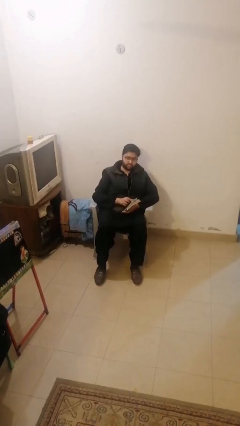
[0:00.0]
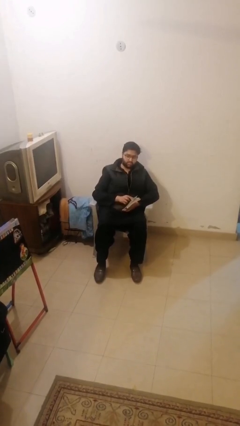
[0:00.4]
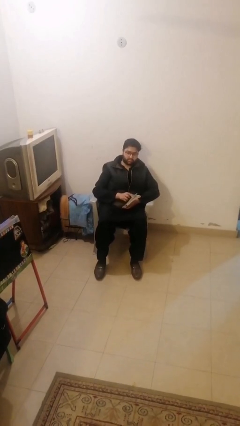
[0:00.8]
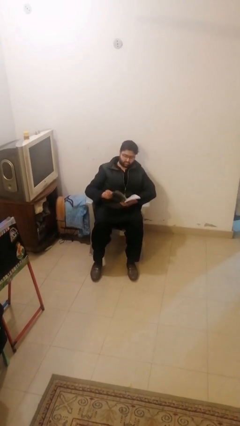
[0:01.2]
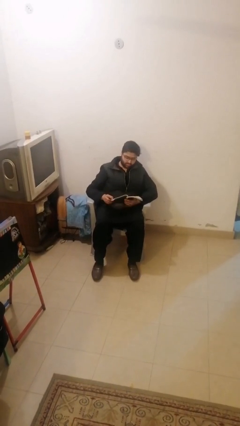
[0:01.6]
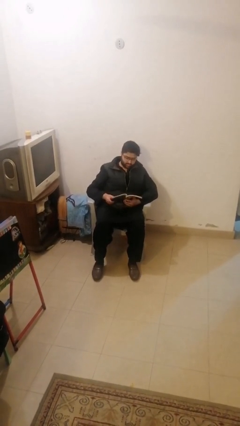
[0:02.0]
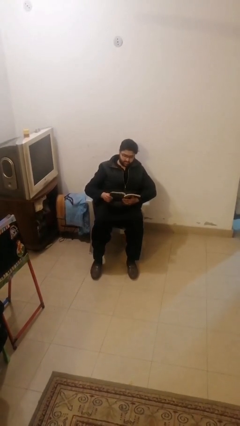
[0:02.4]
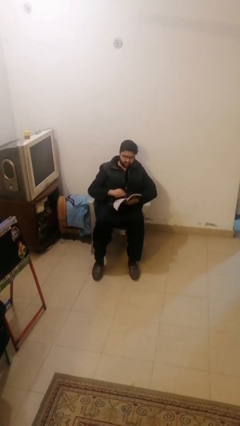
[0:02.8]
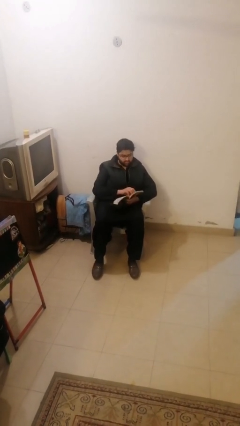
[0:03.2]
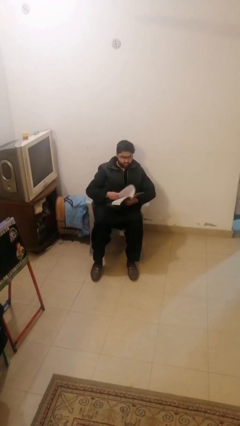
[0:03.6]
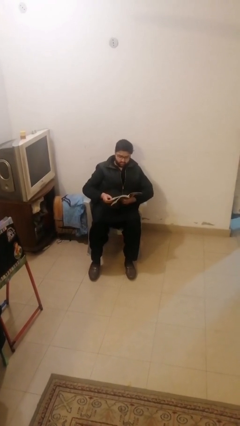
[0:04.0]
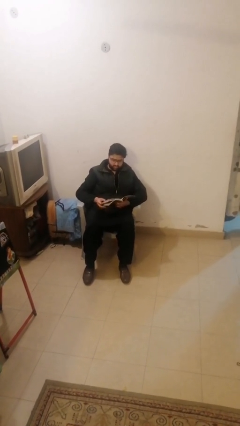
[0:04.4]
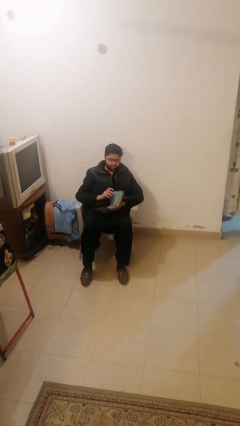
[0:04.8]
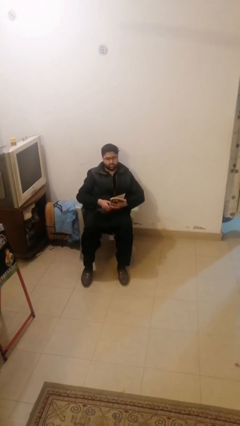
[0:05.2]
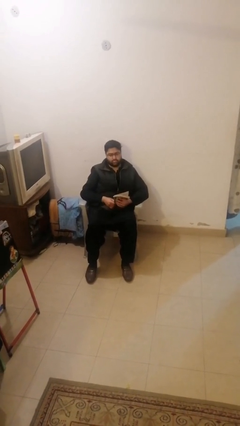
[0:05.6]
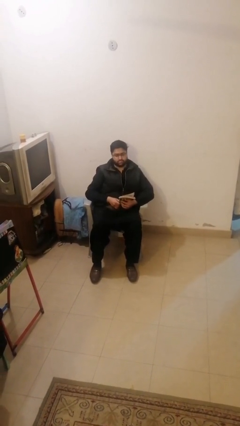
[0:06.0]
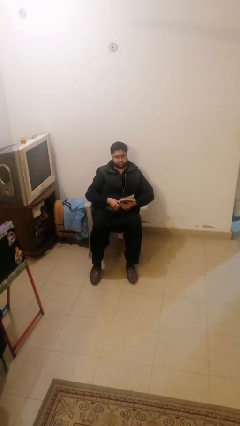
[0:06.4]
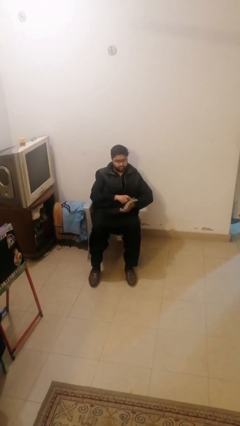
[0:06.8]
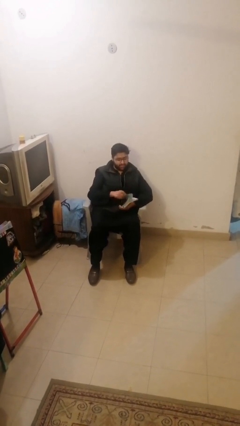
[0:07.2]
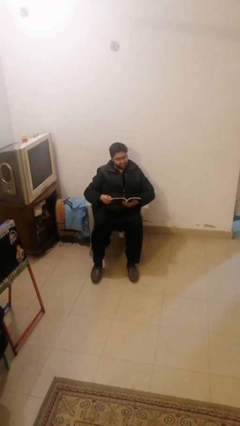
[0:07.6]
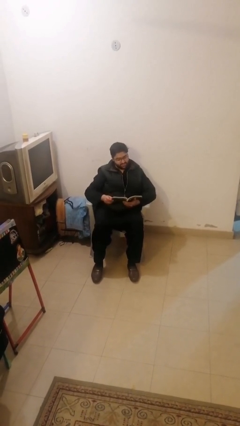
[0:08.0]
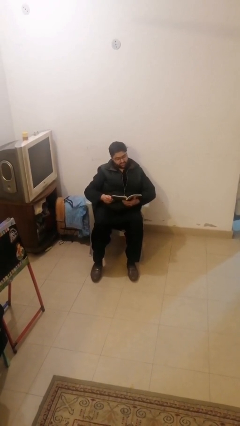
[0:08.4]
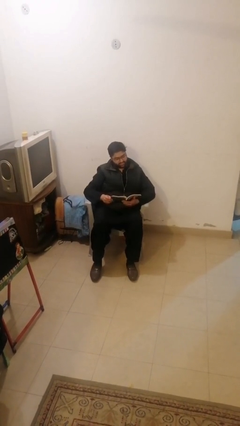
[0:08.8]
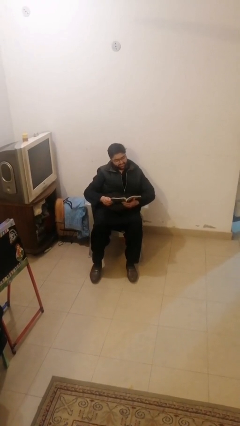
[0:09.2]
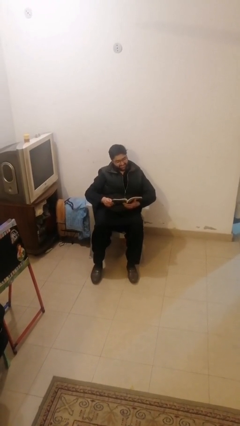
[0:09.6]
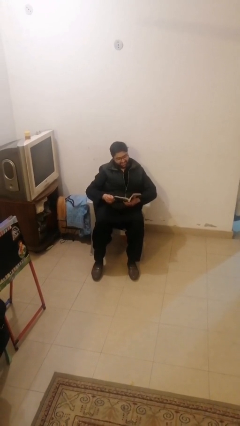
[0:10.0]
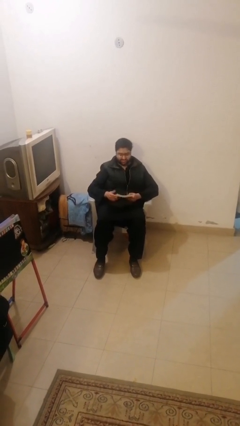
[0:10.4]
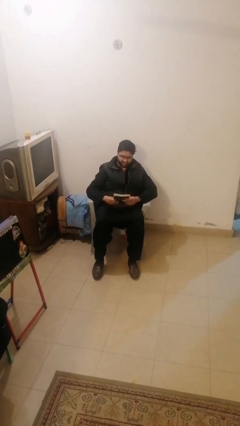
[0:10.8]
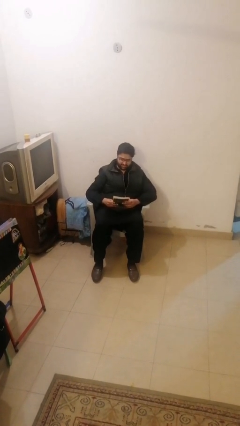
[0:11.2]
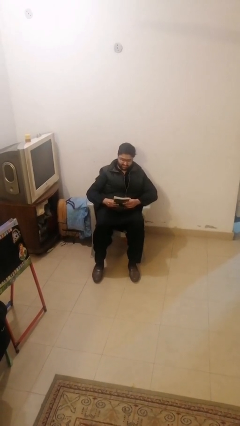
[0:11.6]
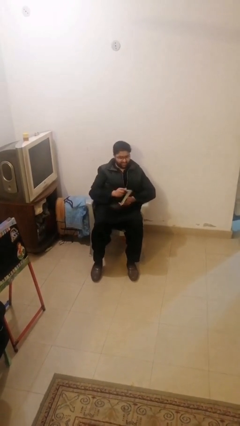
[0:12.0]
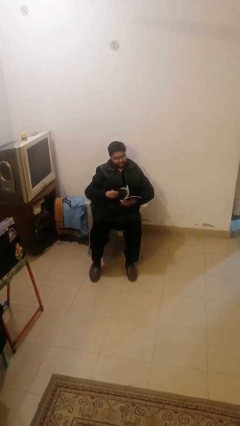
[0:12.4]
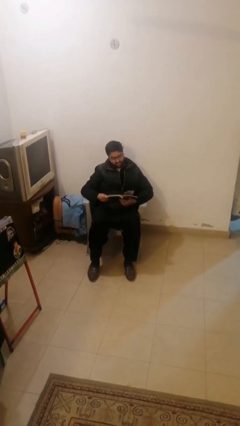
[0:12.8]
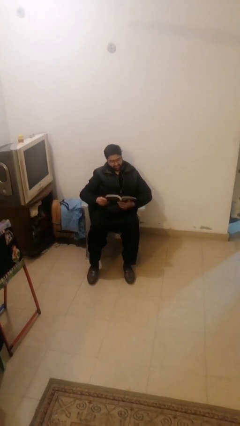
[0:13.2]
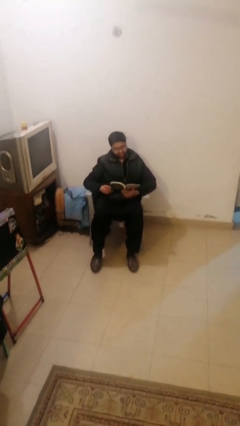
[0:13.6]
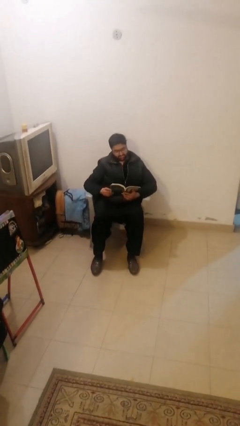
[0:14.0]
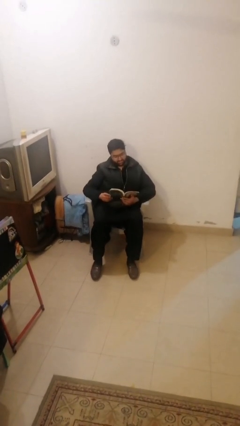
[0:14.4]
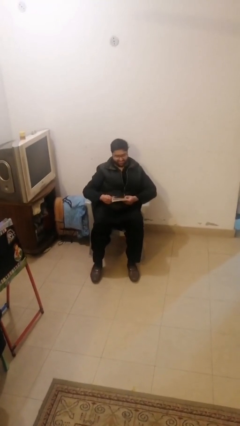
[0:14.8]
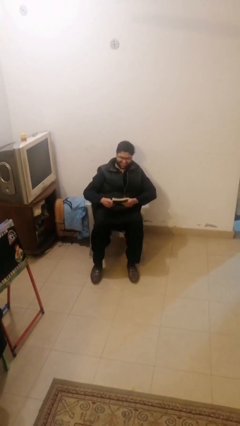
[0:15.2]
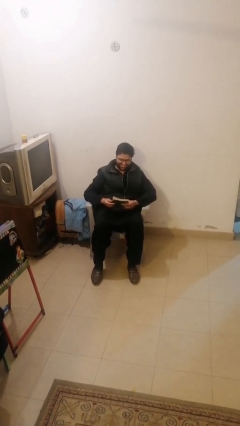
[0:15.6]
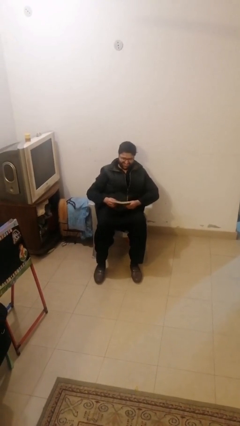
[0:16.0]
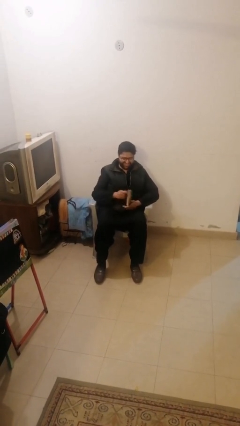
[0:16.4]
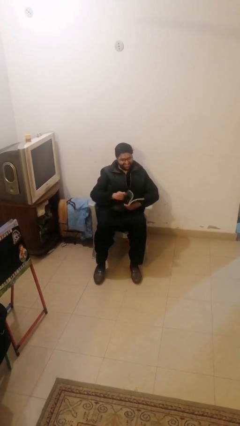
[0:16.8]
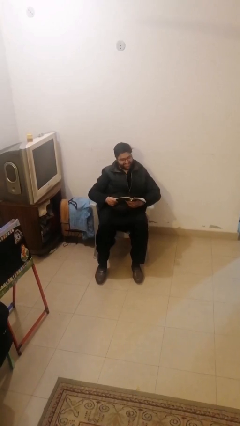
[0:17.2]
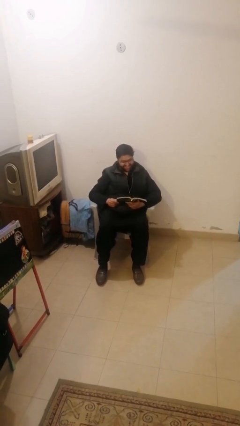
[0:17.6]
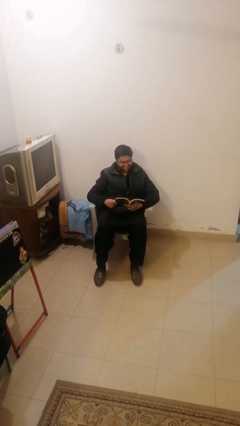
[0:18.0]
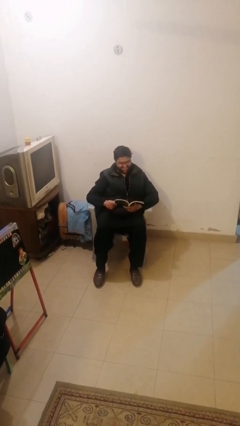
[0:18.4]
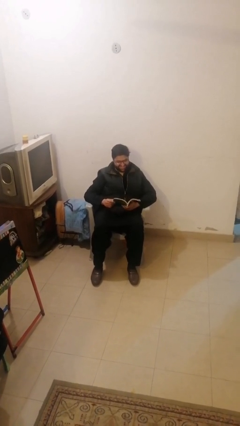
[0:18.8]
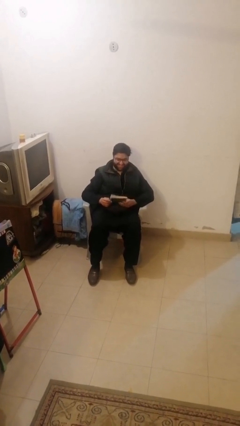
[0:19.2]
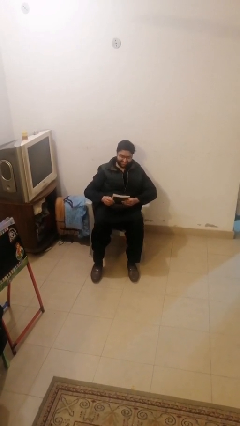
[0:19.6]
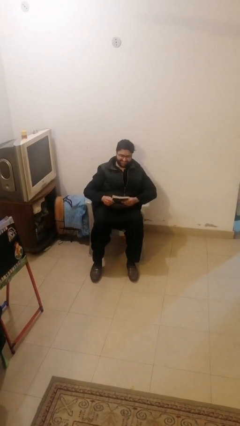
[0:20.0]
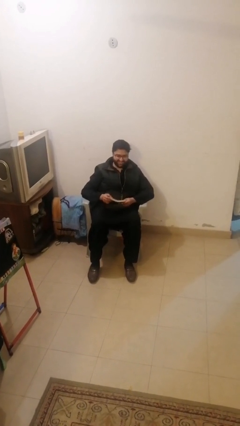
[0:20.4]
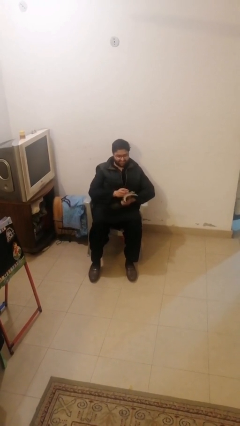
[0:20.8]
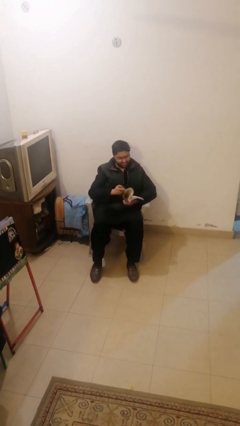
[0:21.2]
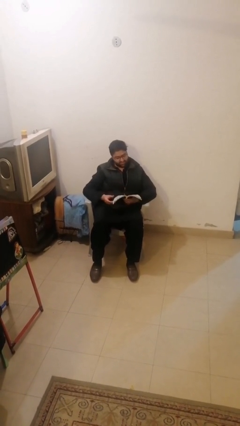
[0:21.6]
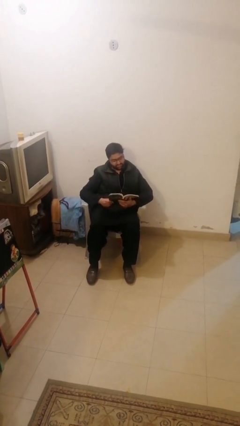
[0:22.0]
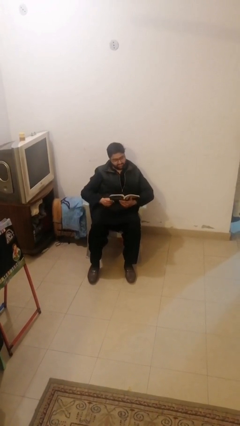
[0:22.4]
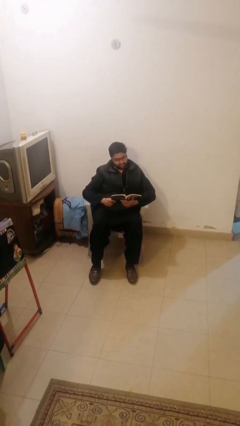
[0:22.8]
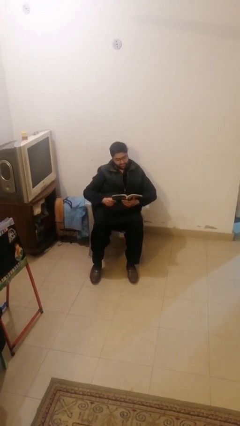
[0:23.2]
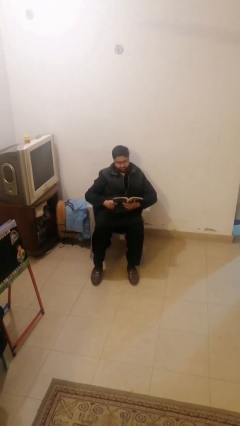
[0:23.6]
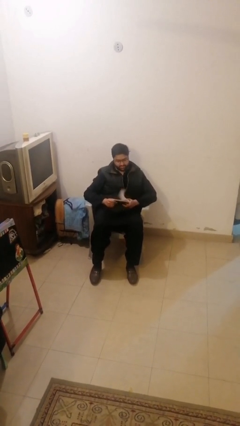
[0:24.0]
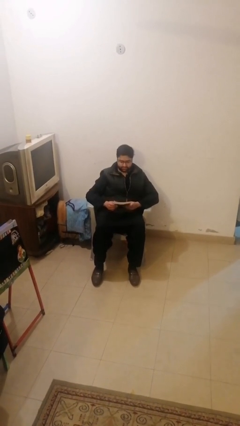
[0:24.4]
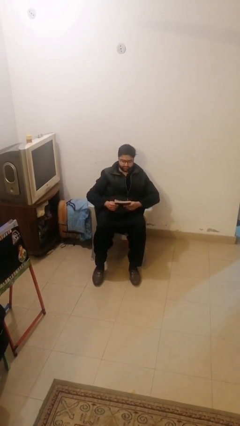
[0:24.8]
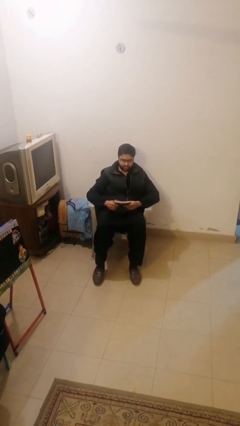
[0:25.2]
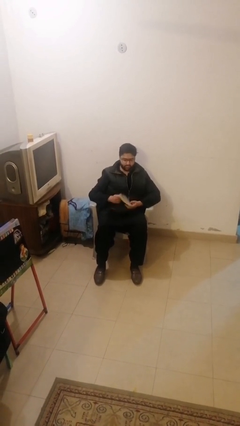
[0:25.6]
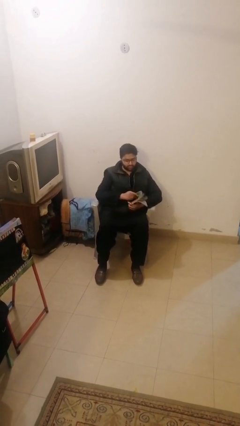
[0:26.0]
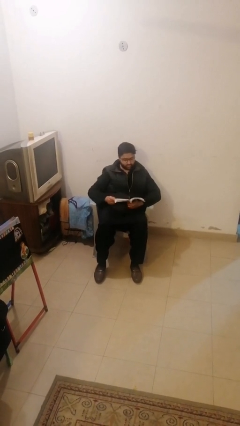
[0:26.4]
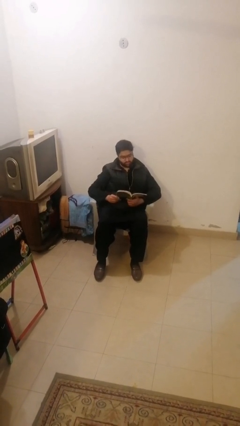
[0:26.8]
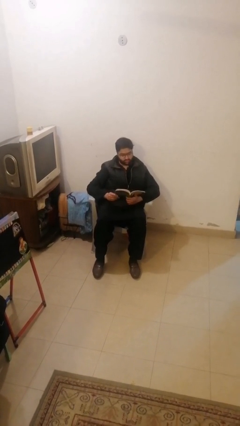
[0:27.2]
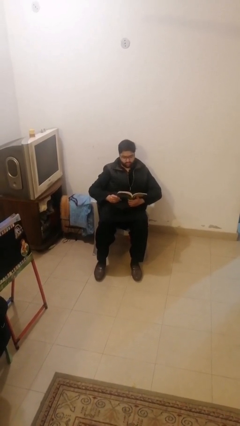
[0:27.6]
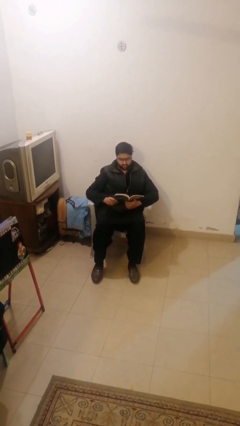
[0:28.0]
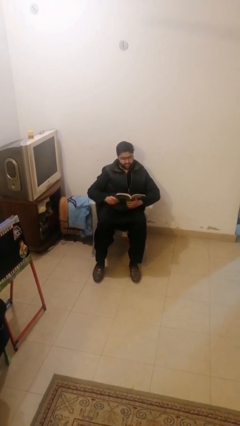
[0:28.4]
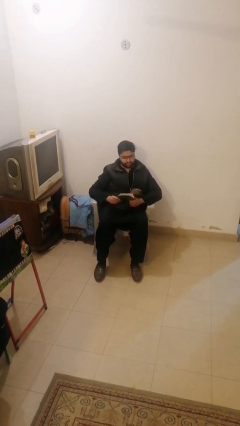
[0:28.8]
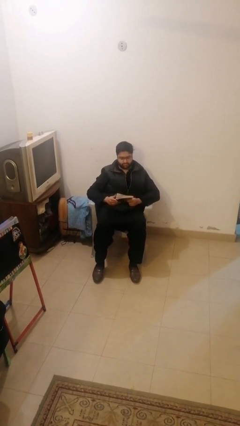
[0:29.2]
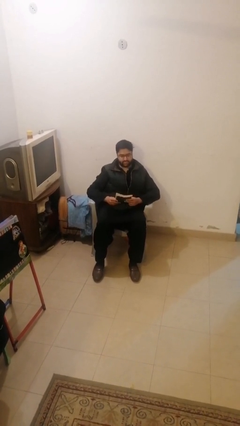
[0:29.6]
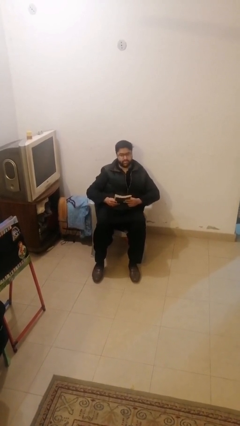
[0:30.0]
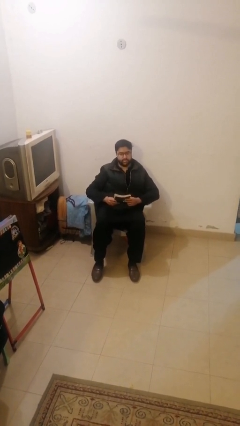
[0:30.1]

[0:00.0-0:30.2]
person reads document

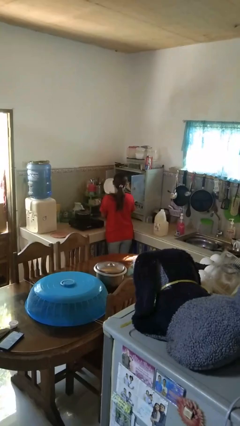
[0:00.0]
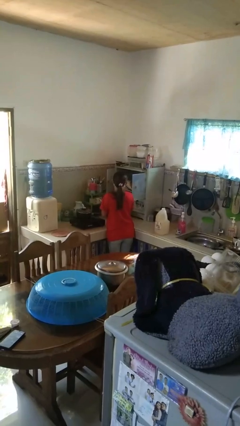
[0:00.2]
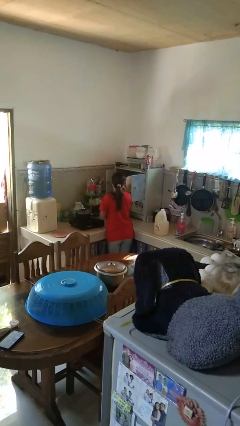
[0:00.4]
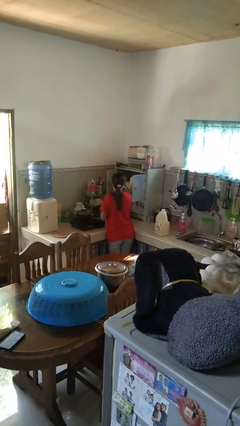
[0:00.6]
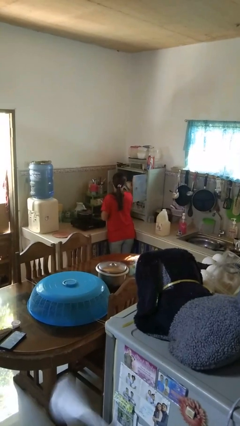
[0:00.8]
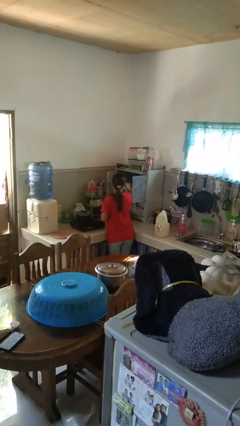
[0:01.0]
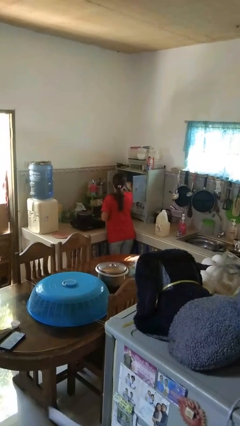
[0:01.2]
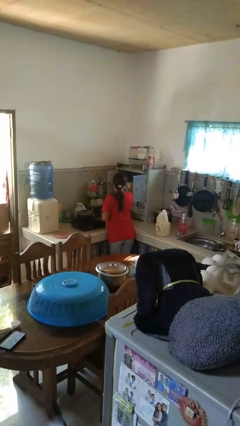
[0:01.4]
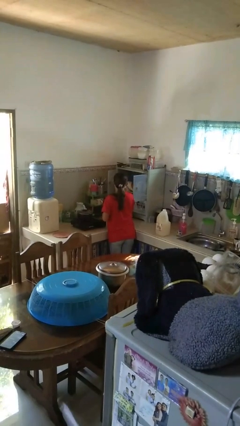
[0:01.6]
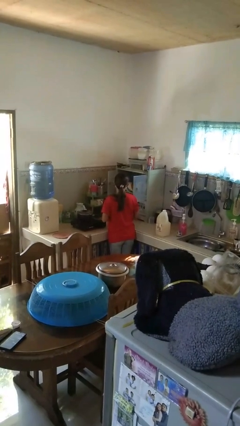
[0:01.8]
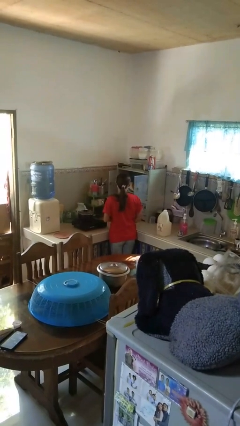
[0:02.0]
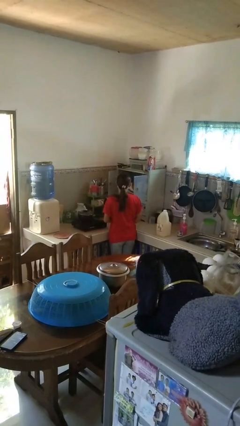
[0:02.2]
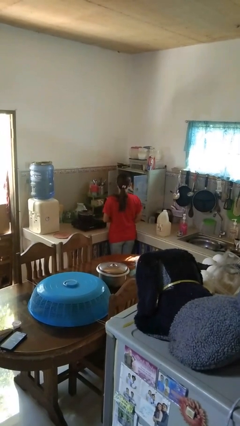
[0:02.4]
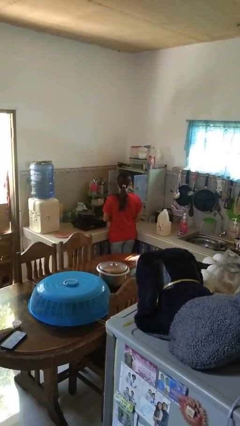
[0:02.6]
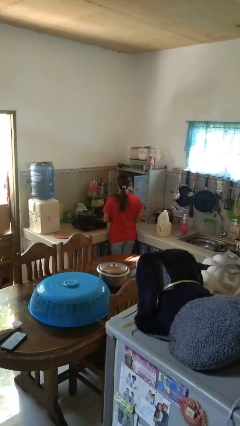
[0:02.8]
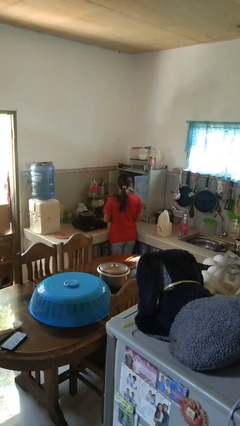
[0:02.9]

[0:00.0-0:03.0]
person puts object in cabinet
